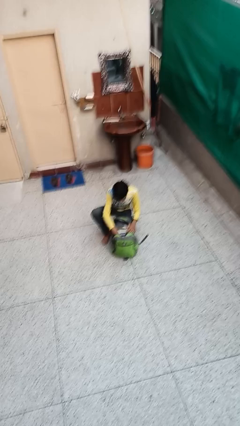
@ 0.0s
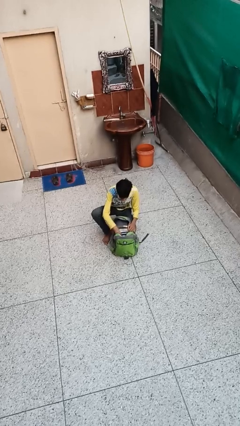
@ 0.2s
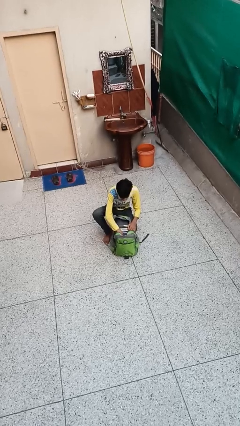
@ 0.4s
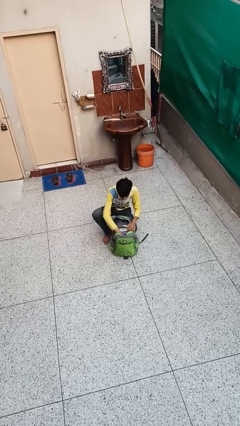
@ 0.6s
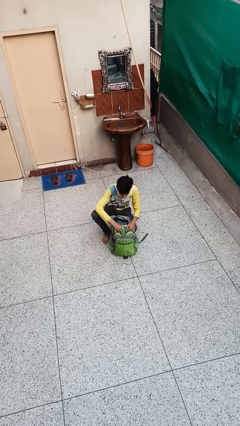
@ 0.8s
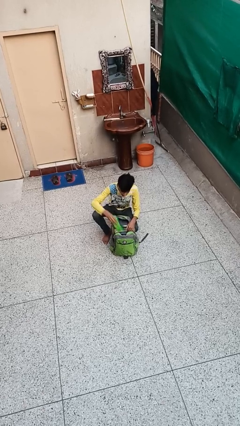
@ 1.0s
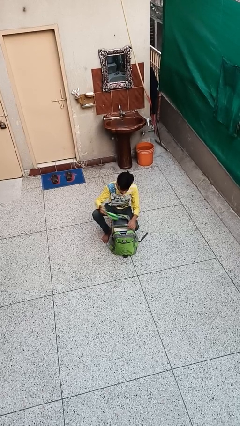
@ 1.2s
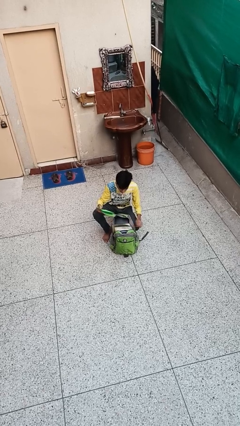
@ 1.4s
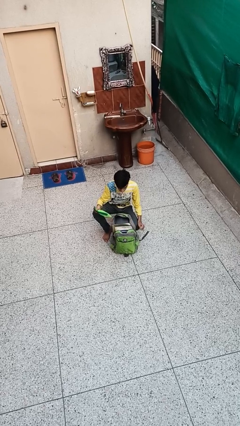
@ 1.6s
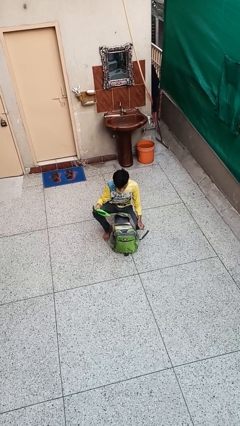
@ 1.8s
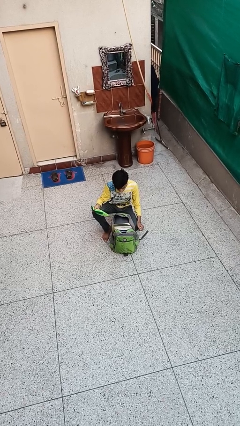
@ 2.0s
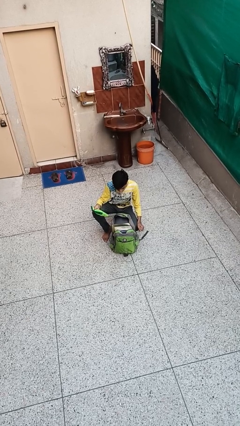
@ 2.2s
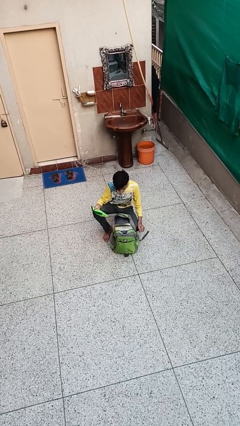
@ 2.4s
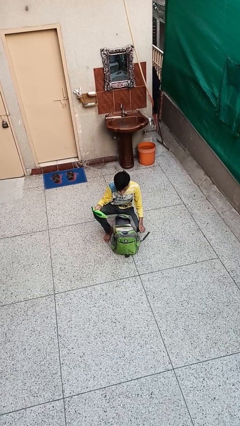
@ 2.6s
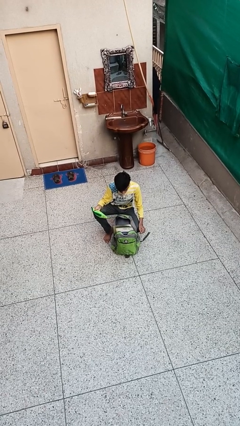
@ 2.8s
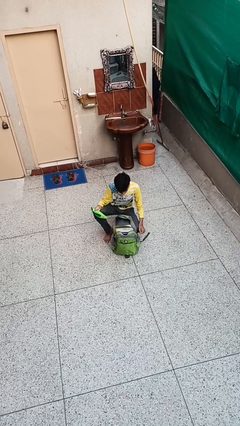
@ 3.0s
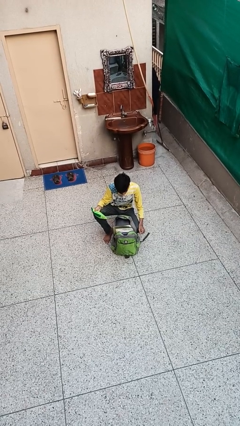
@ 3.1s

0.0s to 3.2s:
person takes object from backpack

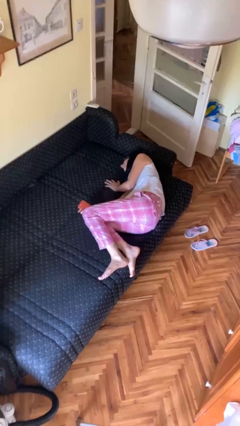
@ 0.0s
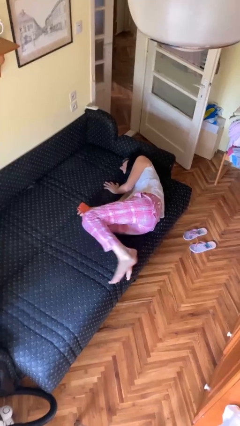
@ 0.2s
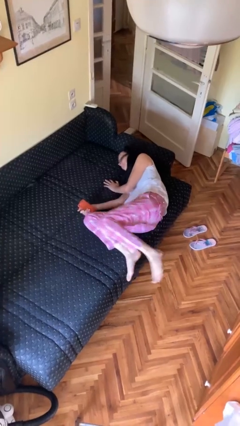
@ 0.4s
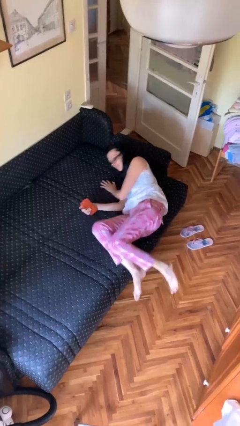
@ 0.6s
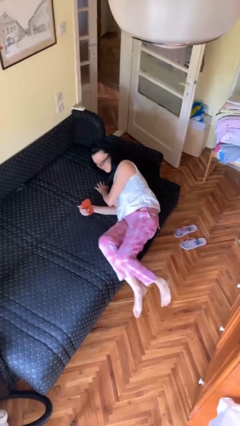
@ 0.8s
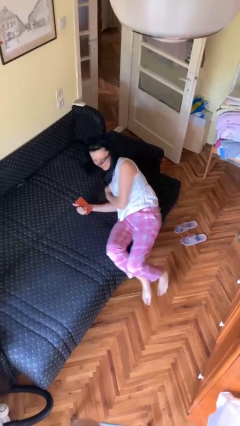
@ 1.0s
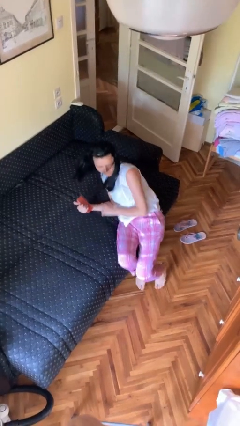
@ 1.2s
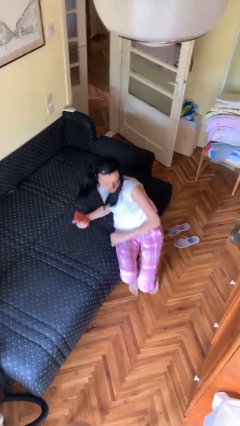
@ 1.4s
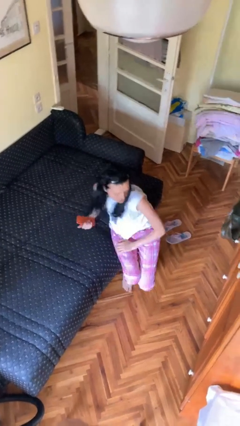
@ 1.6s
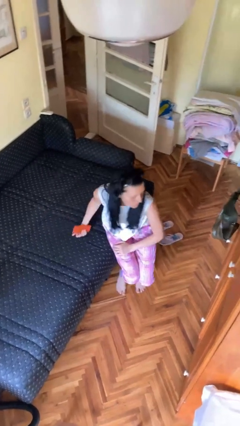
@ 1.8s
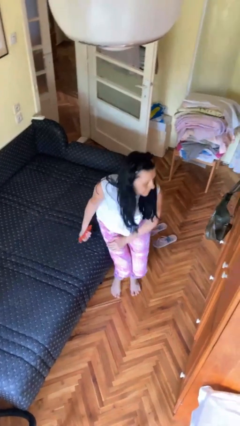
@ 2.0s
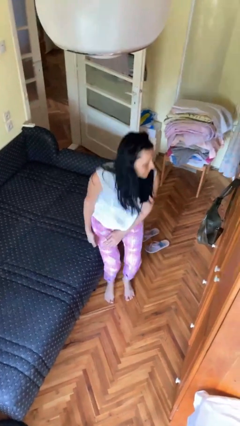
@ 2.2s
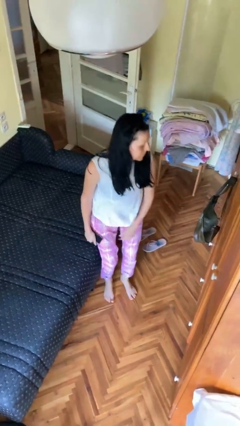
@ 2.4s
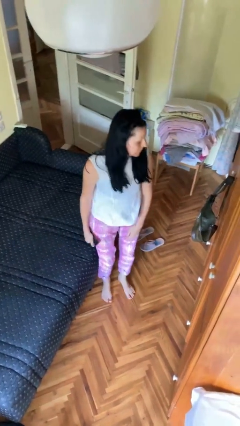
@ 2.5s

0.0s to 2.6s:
person stands up

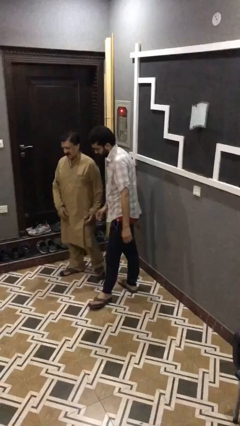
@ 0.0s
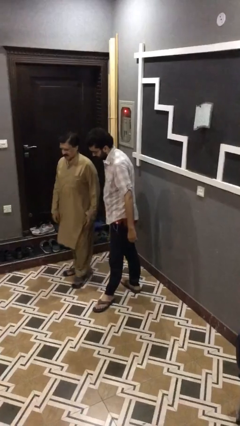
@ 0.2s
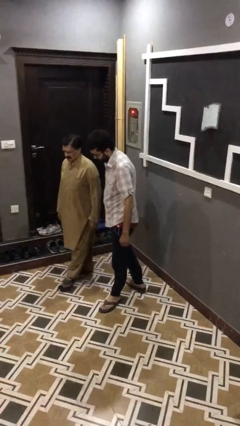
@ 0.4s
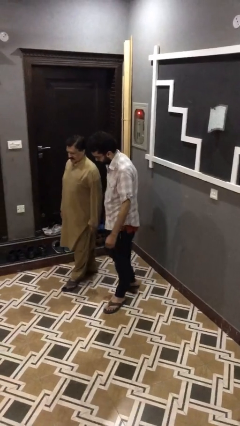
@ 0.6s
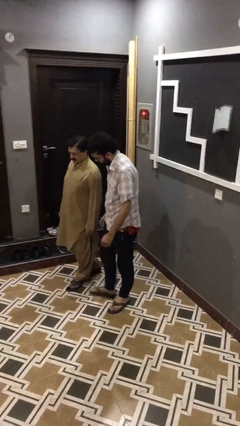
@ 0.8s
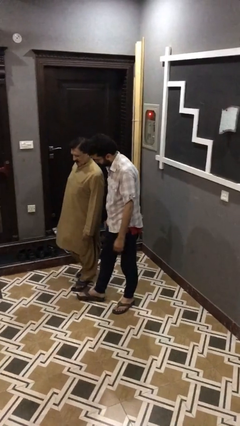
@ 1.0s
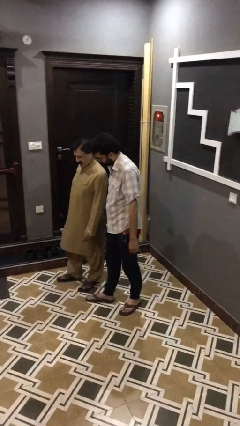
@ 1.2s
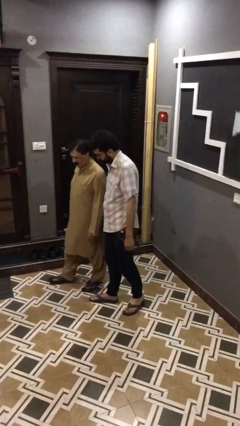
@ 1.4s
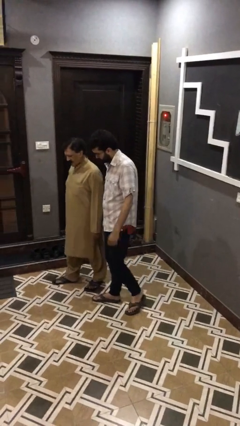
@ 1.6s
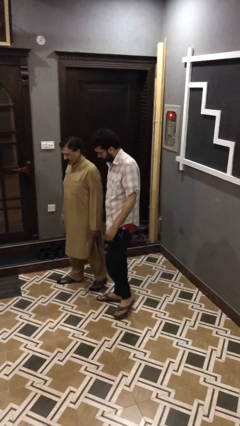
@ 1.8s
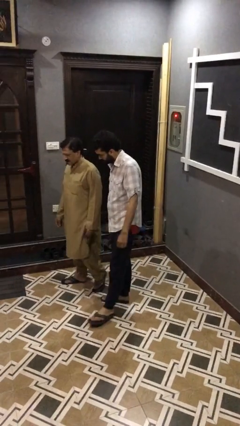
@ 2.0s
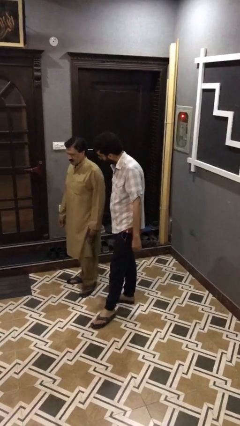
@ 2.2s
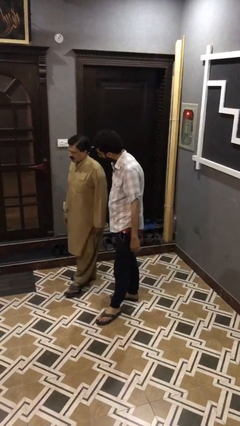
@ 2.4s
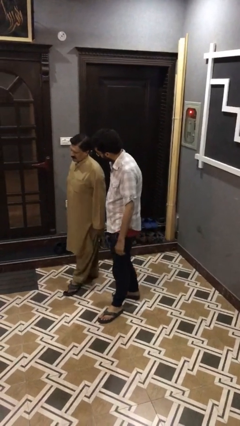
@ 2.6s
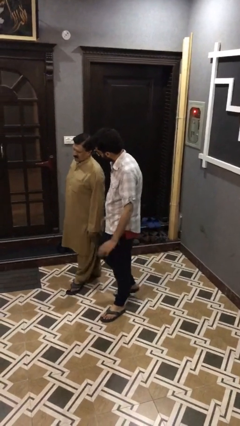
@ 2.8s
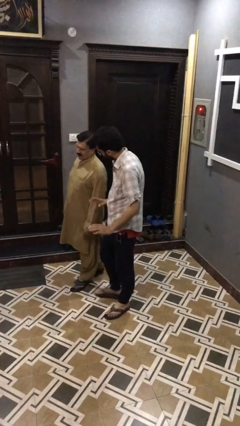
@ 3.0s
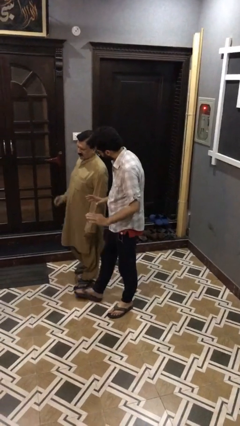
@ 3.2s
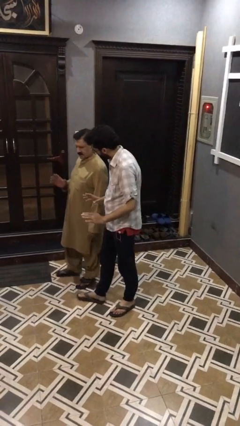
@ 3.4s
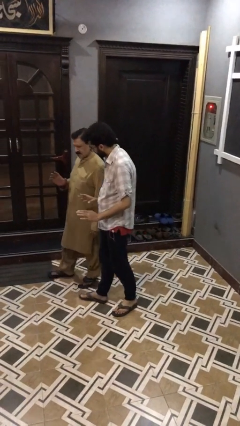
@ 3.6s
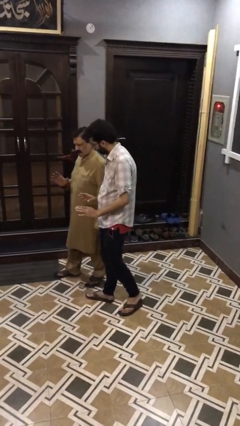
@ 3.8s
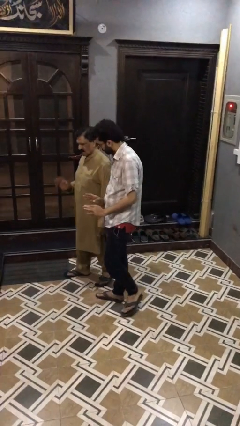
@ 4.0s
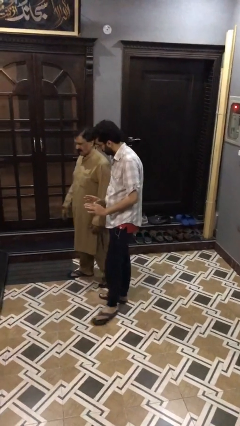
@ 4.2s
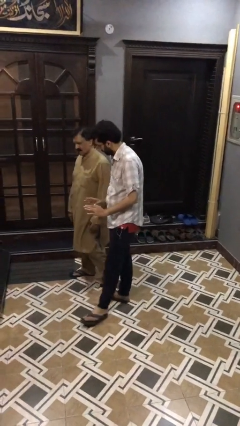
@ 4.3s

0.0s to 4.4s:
person talks to person

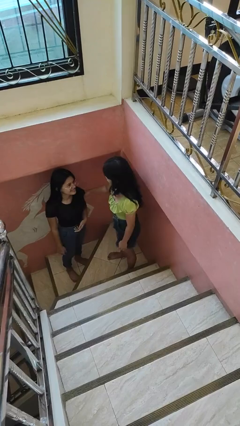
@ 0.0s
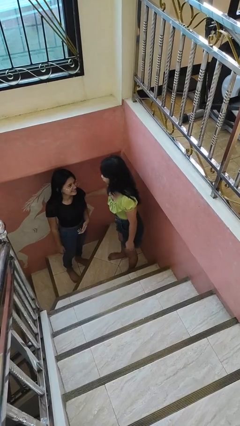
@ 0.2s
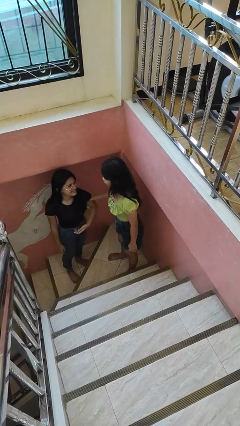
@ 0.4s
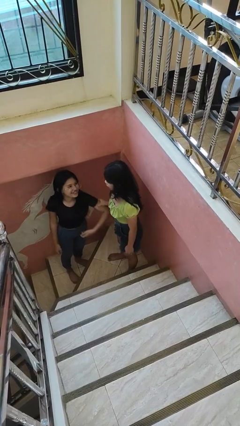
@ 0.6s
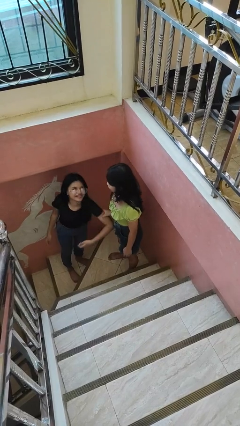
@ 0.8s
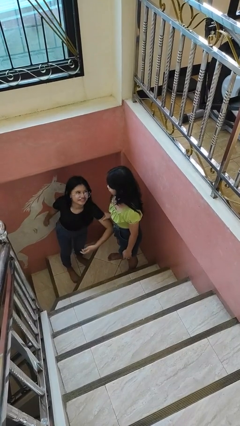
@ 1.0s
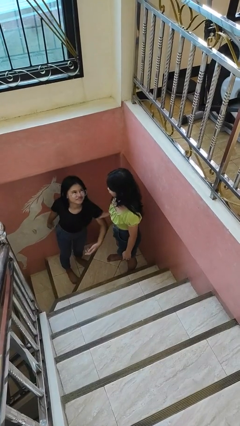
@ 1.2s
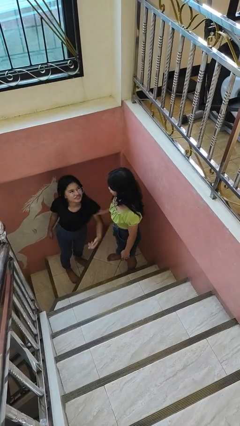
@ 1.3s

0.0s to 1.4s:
person grabs person by bicep

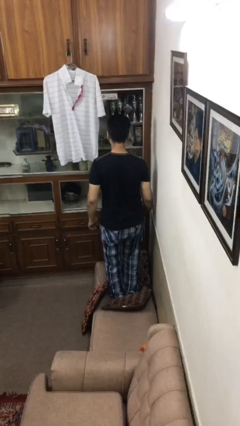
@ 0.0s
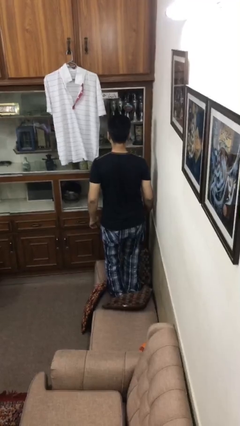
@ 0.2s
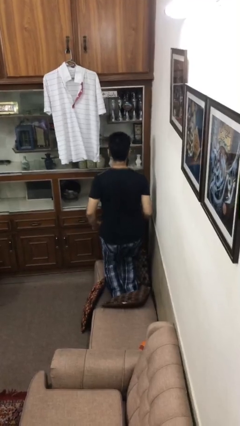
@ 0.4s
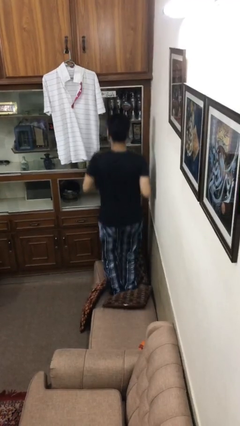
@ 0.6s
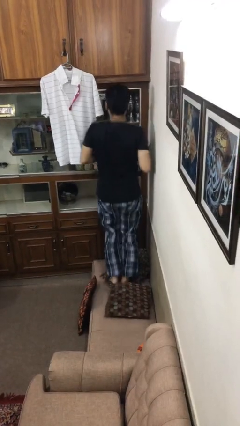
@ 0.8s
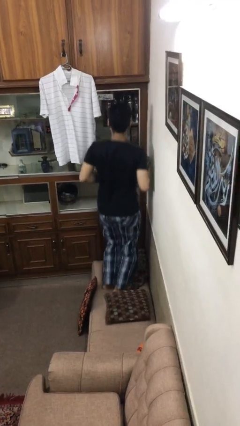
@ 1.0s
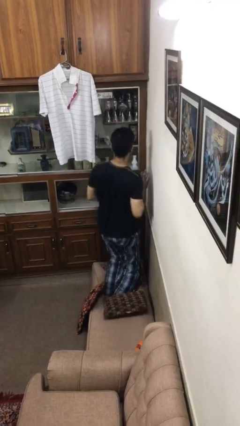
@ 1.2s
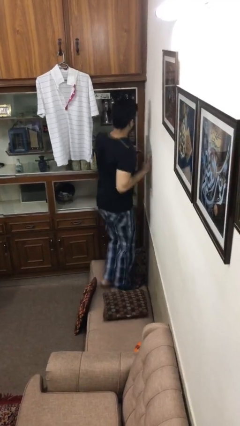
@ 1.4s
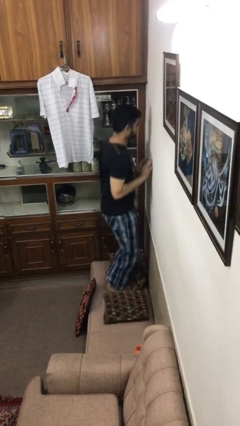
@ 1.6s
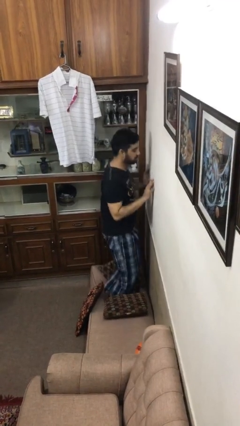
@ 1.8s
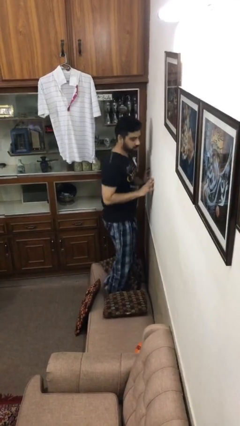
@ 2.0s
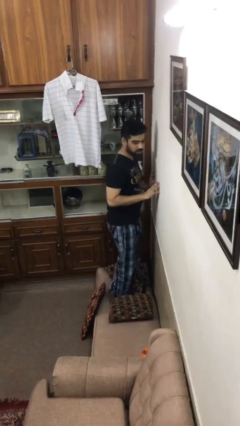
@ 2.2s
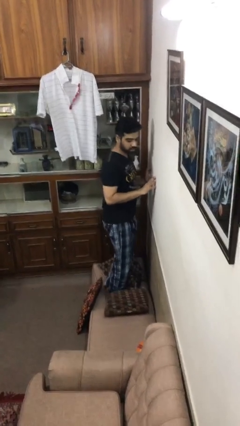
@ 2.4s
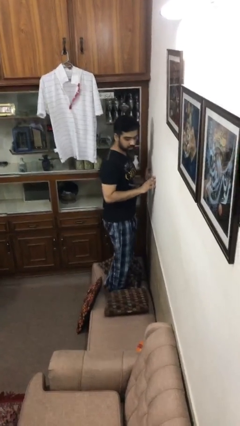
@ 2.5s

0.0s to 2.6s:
person jumps on couch

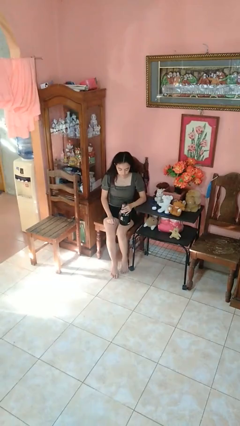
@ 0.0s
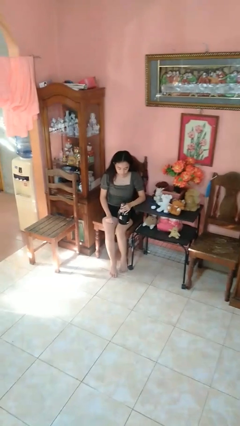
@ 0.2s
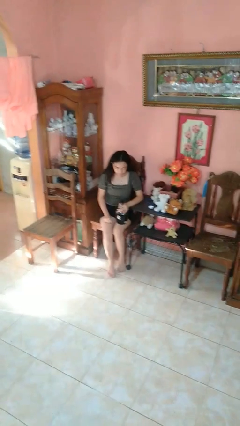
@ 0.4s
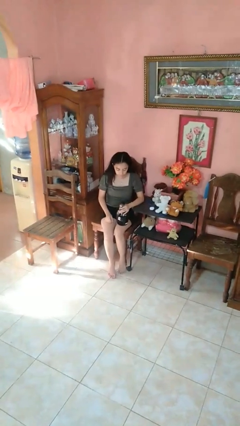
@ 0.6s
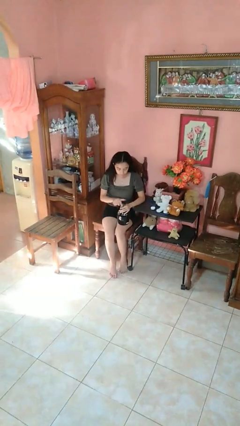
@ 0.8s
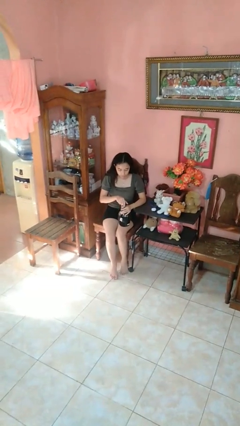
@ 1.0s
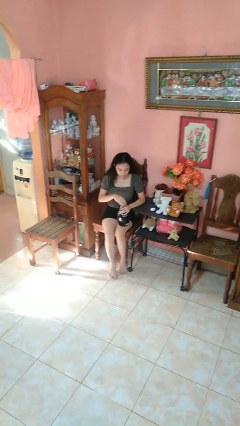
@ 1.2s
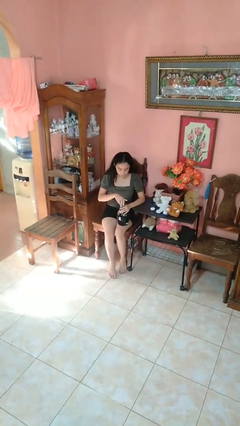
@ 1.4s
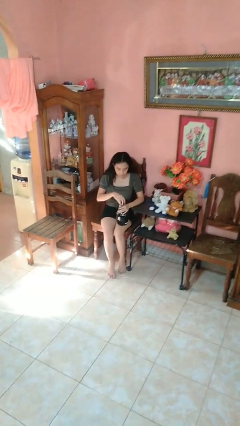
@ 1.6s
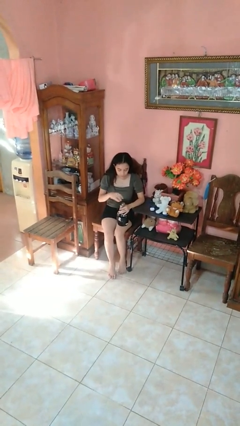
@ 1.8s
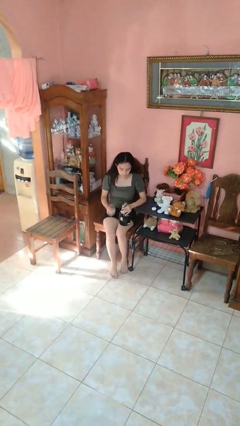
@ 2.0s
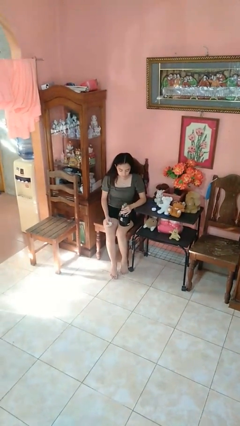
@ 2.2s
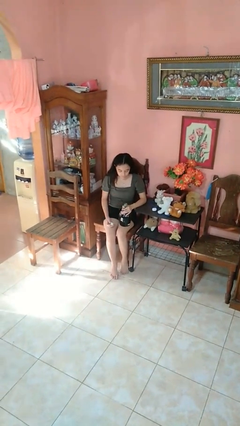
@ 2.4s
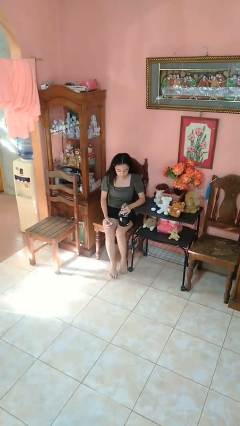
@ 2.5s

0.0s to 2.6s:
person unscrews lid from bottle

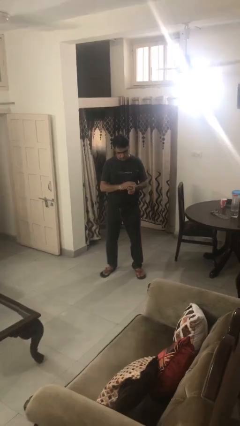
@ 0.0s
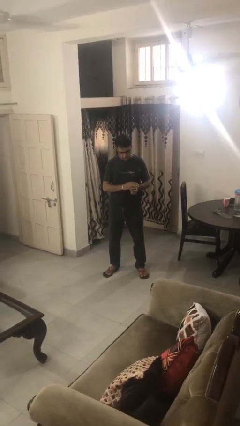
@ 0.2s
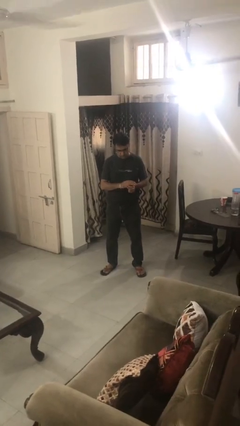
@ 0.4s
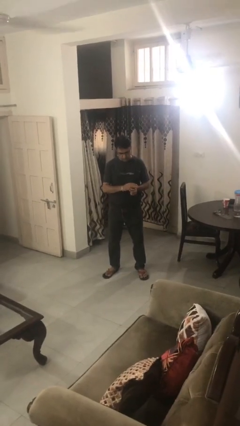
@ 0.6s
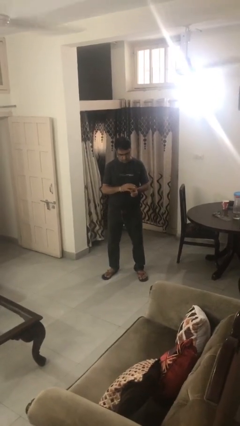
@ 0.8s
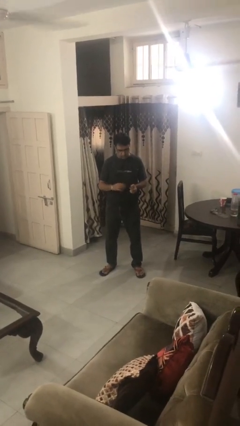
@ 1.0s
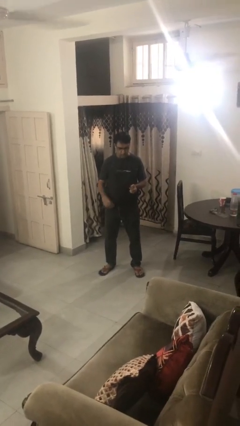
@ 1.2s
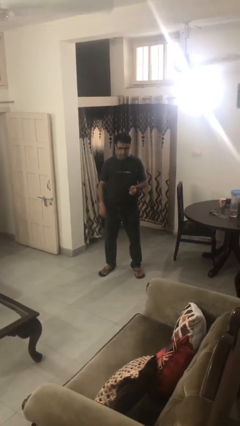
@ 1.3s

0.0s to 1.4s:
person takes off ring
